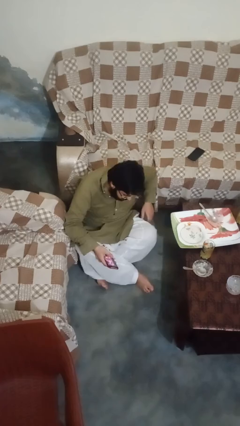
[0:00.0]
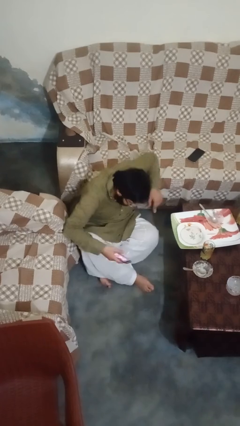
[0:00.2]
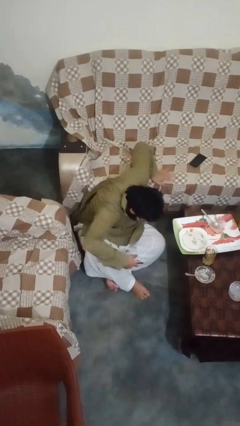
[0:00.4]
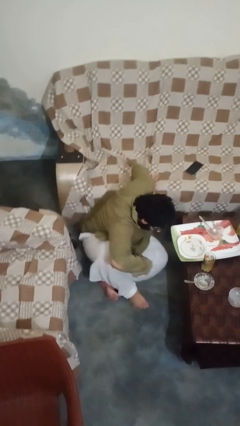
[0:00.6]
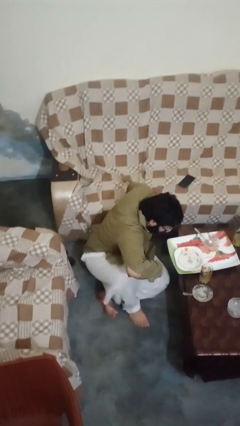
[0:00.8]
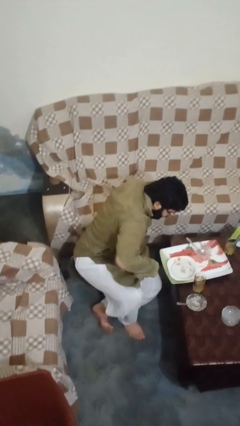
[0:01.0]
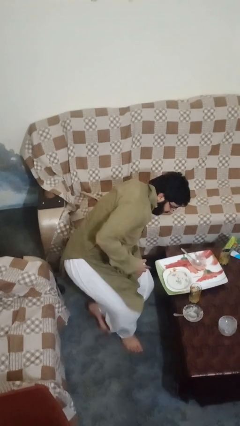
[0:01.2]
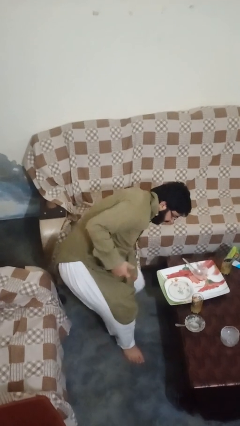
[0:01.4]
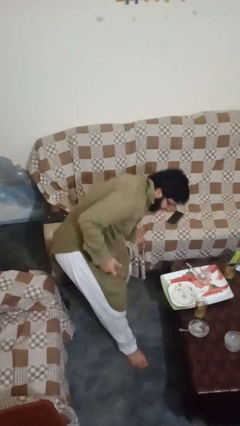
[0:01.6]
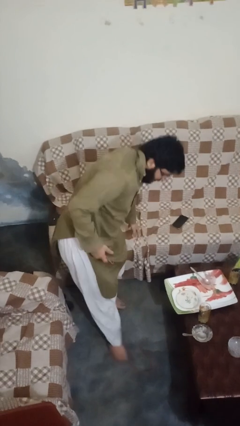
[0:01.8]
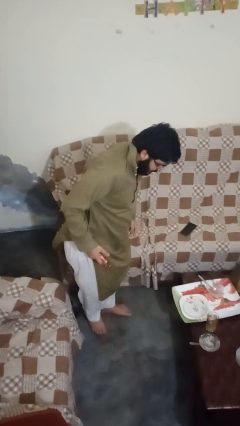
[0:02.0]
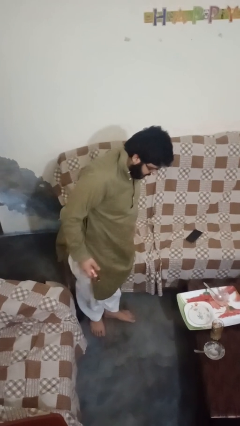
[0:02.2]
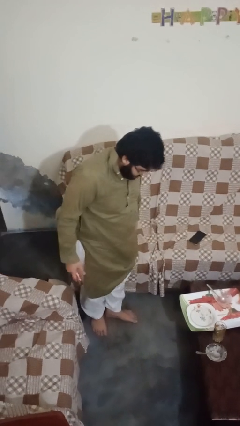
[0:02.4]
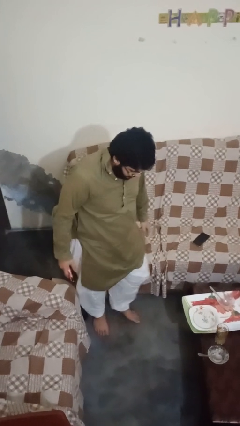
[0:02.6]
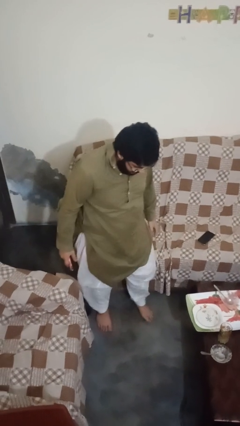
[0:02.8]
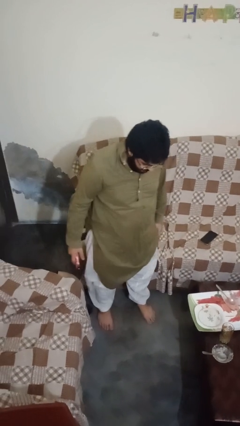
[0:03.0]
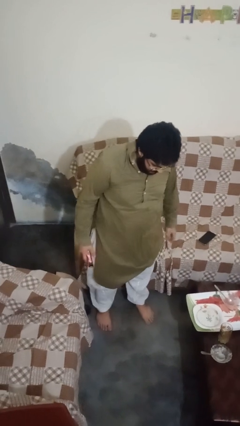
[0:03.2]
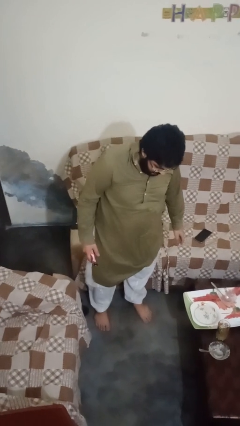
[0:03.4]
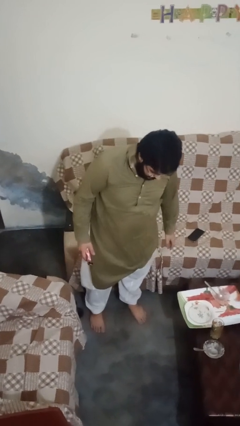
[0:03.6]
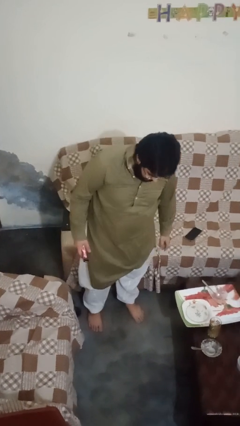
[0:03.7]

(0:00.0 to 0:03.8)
person stands up from floor

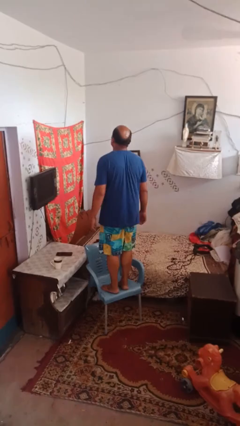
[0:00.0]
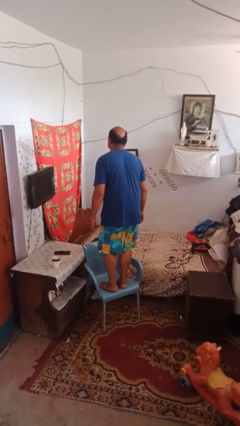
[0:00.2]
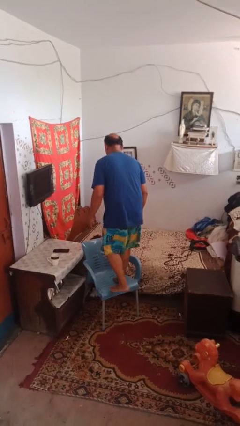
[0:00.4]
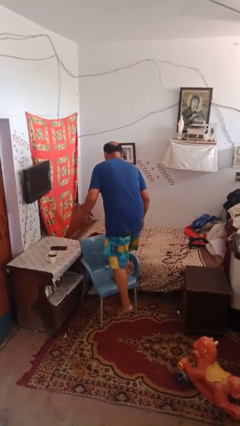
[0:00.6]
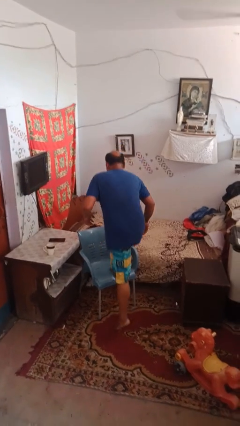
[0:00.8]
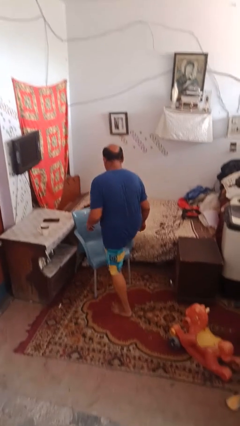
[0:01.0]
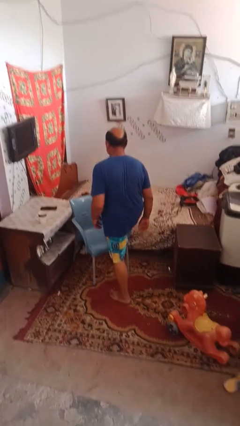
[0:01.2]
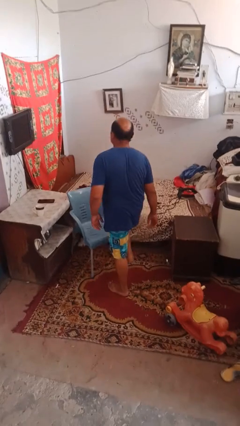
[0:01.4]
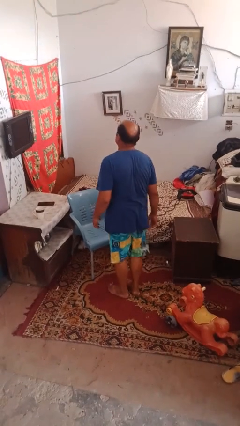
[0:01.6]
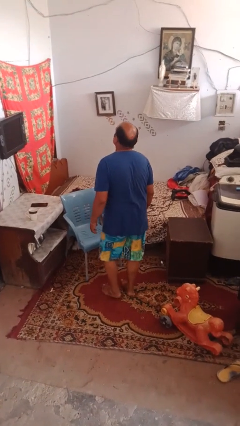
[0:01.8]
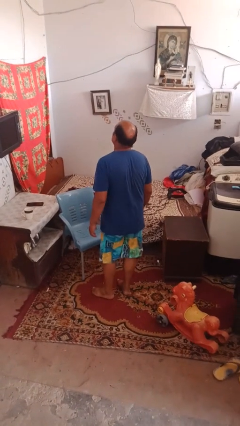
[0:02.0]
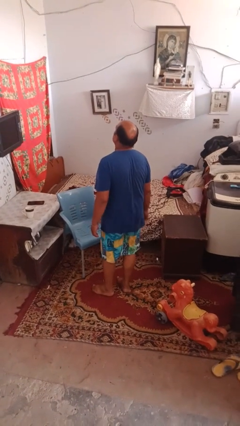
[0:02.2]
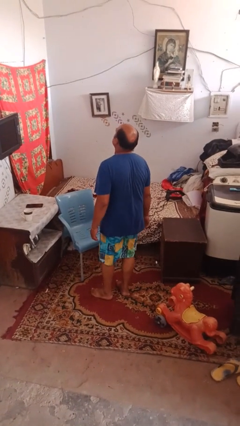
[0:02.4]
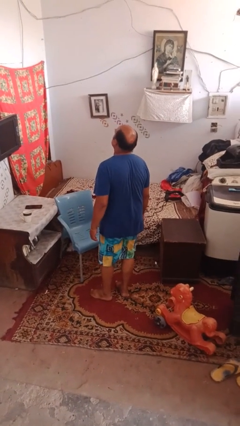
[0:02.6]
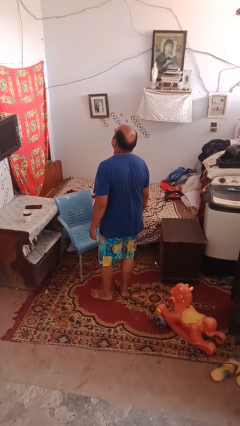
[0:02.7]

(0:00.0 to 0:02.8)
person climbs off chair

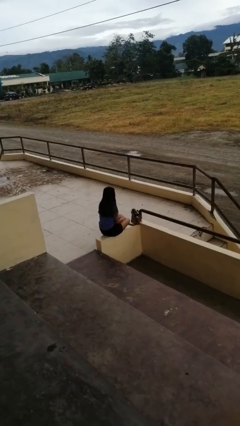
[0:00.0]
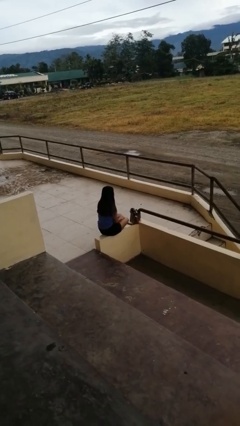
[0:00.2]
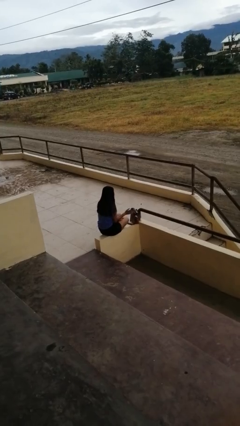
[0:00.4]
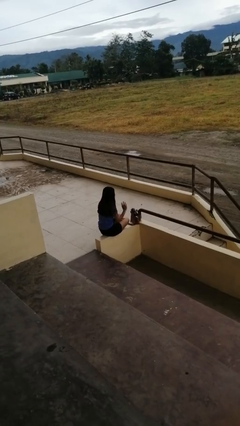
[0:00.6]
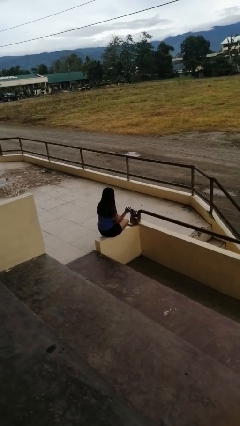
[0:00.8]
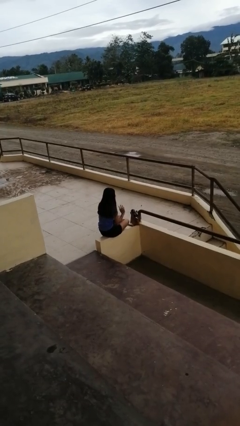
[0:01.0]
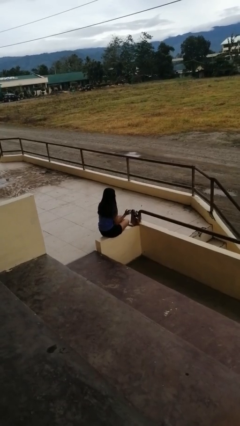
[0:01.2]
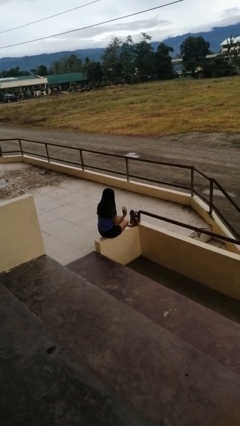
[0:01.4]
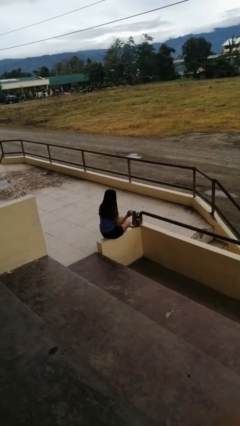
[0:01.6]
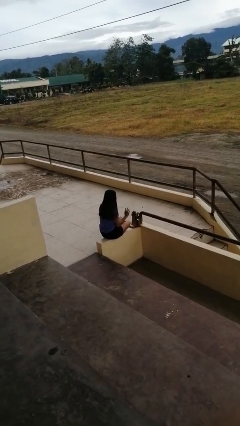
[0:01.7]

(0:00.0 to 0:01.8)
person waves hand over object

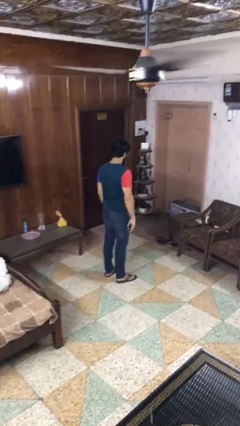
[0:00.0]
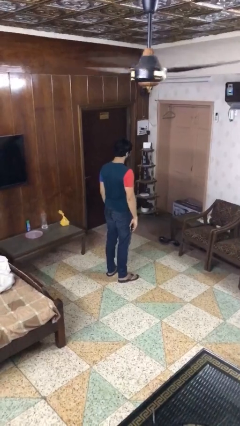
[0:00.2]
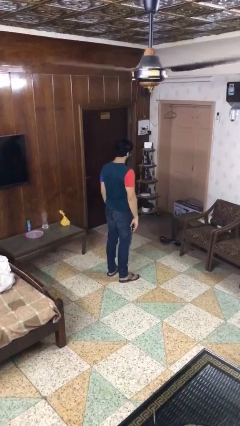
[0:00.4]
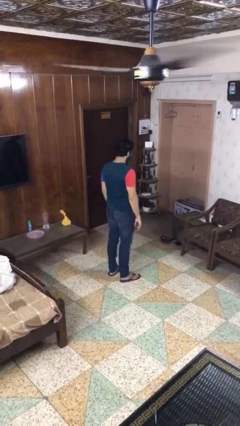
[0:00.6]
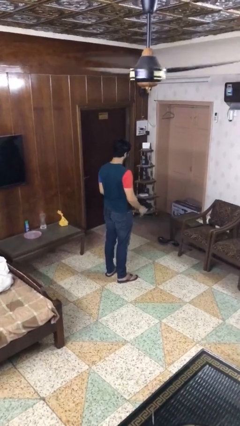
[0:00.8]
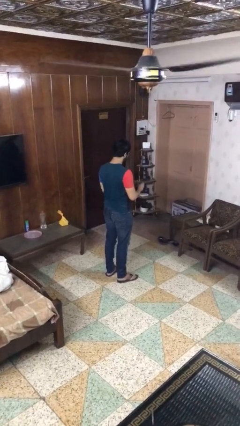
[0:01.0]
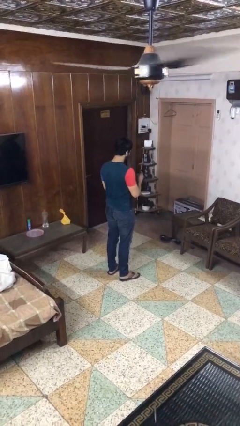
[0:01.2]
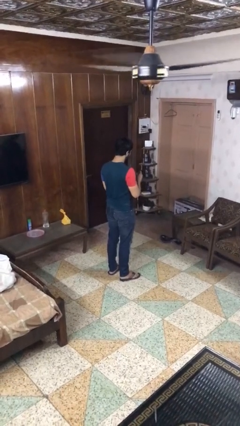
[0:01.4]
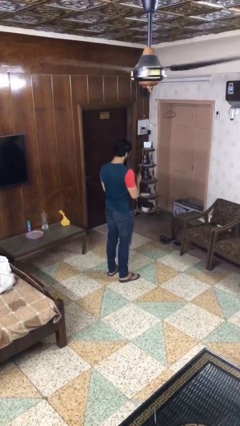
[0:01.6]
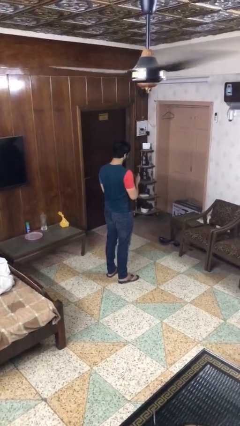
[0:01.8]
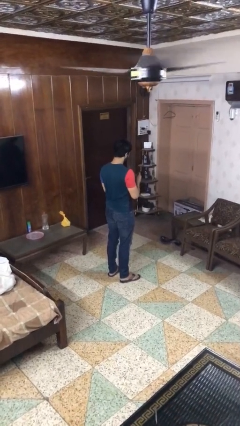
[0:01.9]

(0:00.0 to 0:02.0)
person clips fingernails

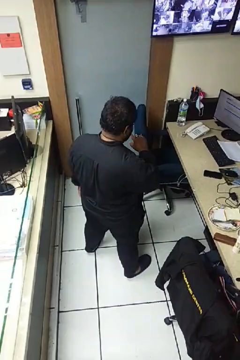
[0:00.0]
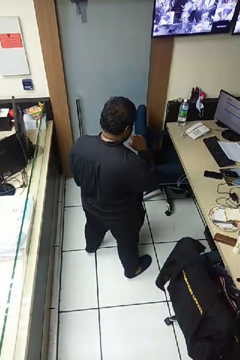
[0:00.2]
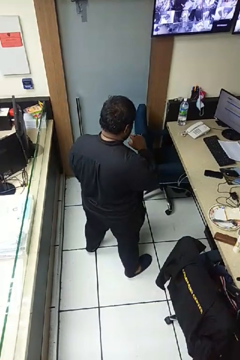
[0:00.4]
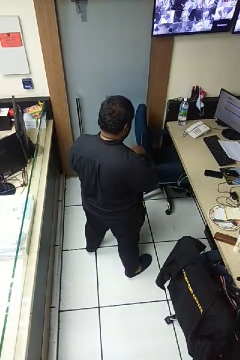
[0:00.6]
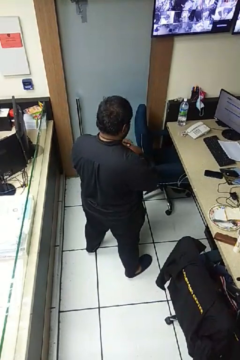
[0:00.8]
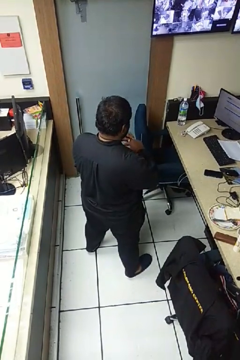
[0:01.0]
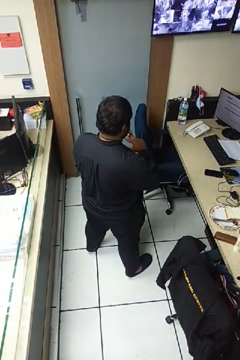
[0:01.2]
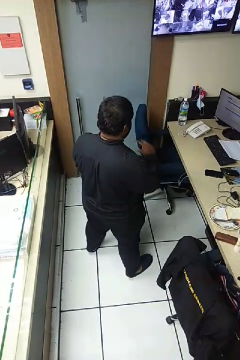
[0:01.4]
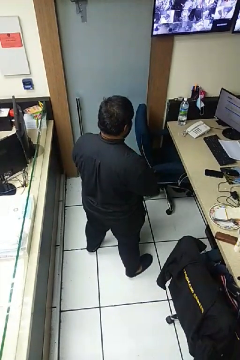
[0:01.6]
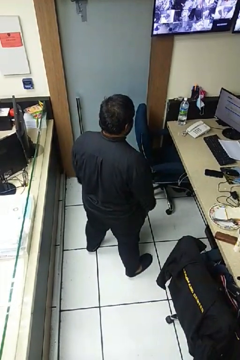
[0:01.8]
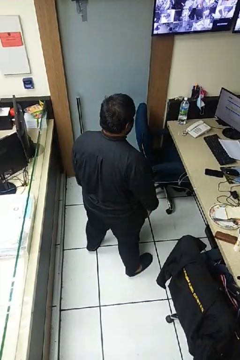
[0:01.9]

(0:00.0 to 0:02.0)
person takes off ring

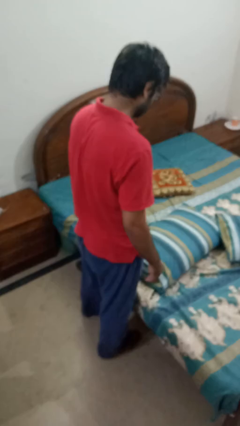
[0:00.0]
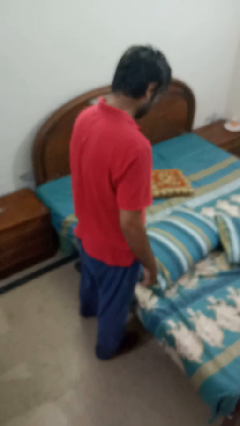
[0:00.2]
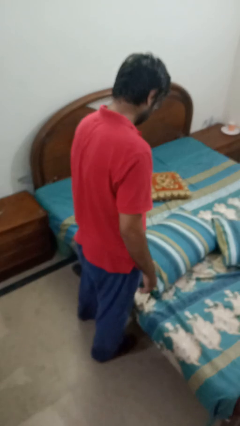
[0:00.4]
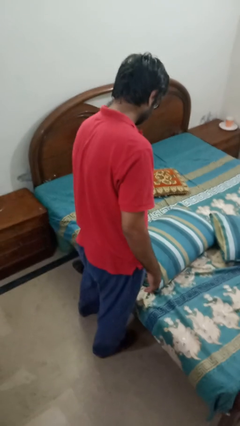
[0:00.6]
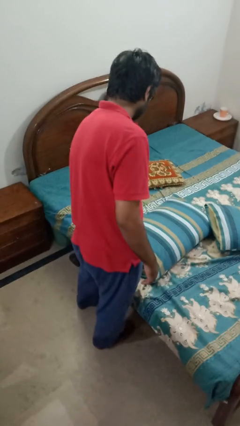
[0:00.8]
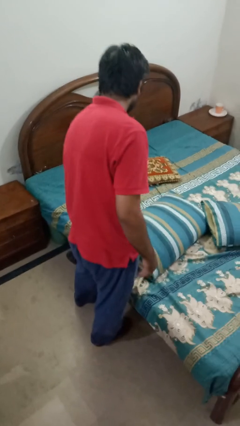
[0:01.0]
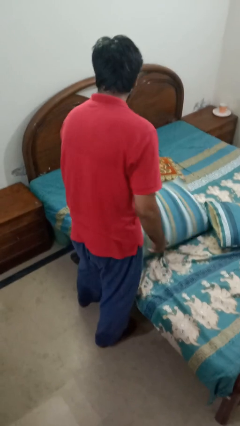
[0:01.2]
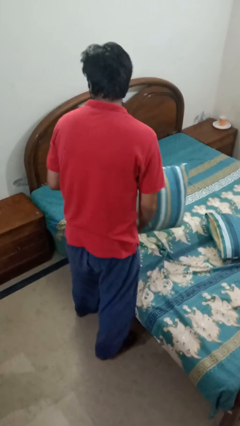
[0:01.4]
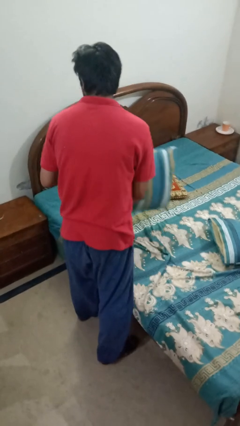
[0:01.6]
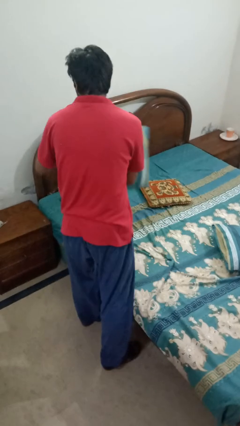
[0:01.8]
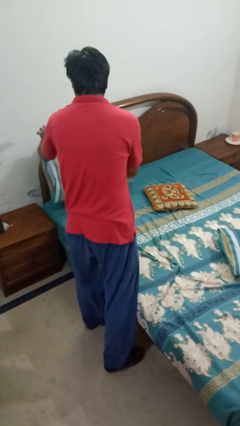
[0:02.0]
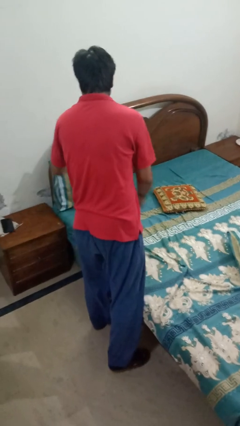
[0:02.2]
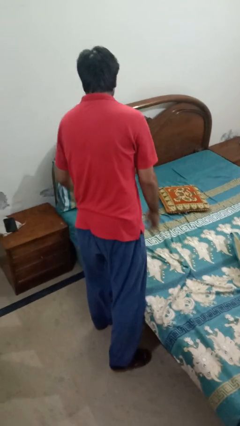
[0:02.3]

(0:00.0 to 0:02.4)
person makes bed

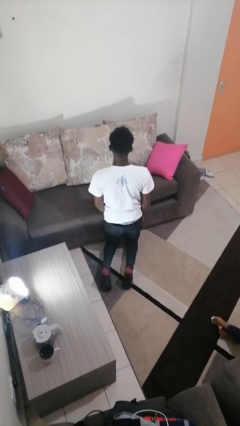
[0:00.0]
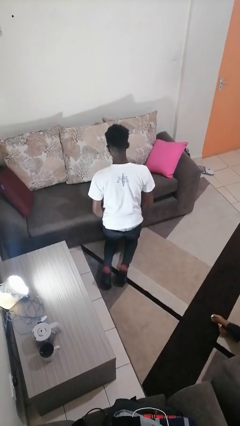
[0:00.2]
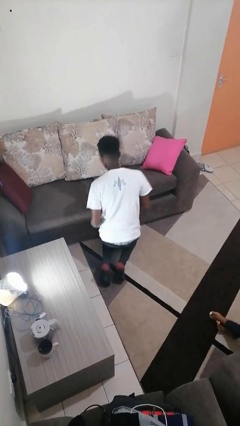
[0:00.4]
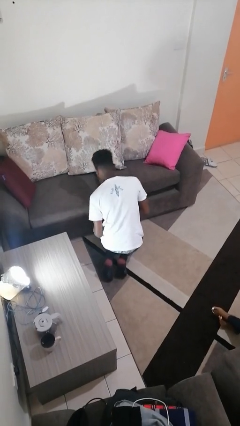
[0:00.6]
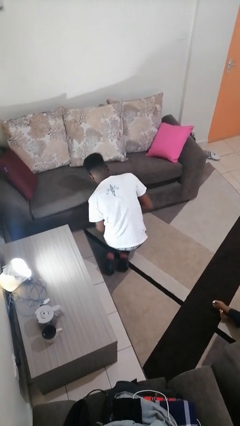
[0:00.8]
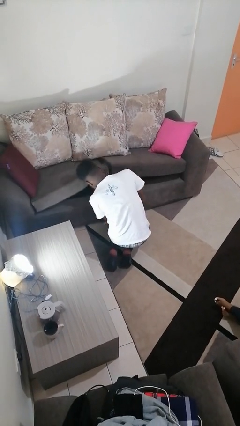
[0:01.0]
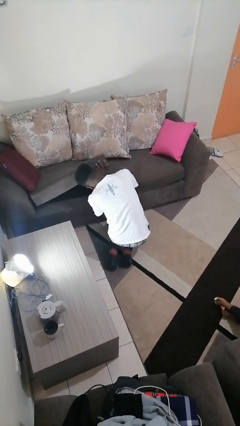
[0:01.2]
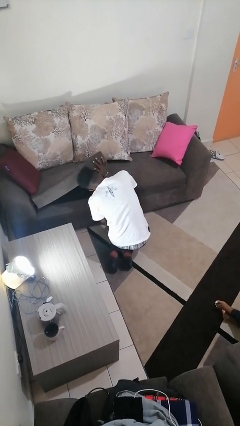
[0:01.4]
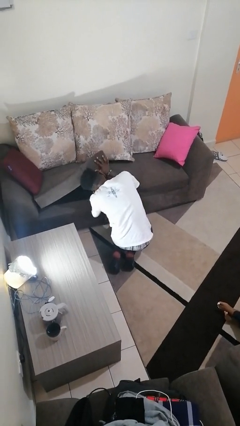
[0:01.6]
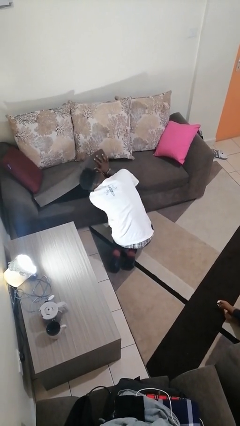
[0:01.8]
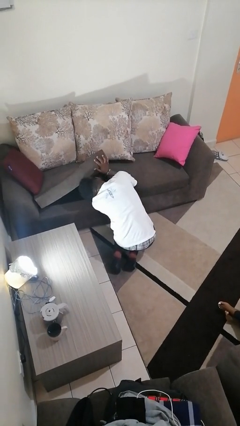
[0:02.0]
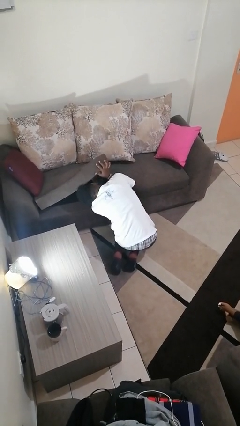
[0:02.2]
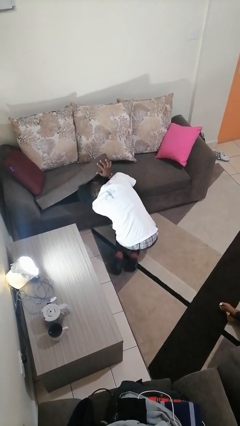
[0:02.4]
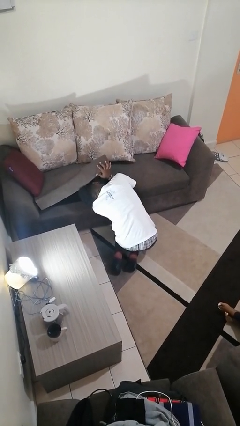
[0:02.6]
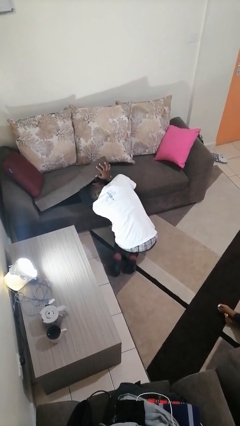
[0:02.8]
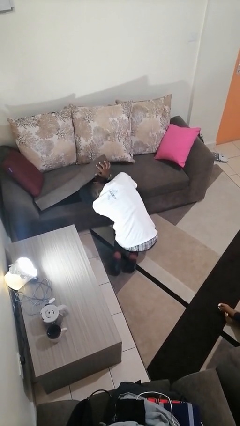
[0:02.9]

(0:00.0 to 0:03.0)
person searches under couch
